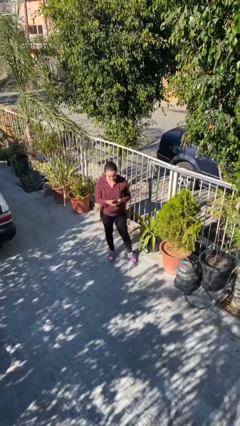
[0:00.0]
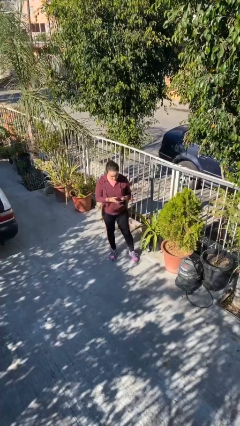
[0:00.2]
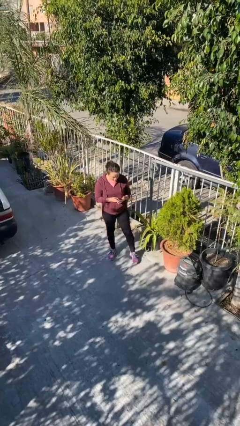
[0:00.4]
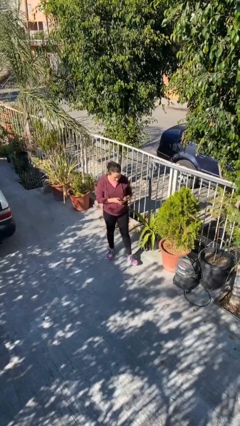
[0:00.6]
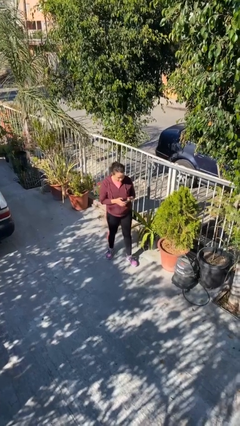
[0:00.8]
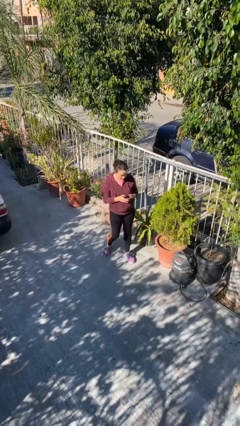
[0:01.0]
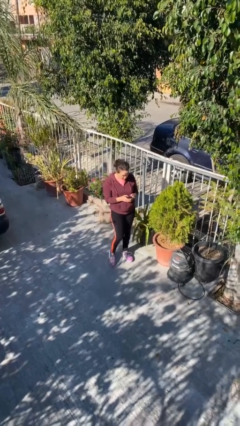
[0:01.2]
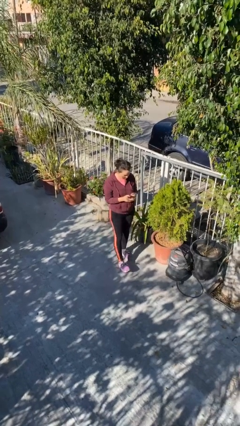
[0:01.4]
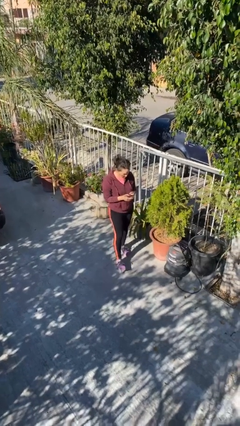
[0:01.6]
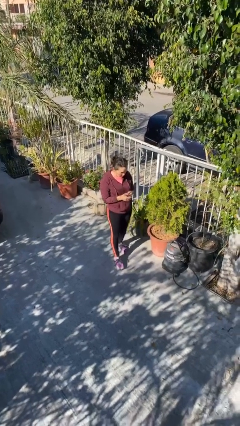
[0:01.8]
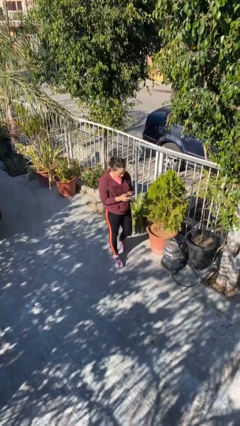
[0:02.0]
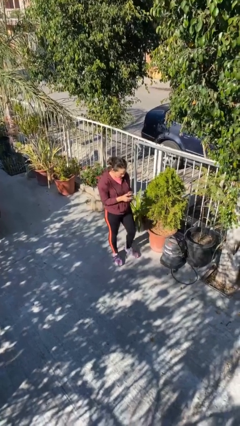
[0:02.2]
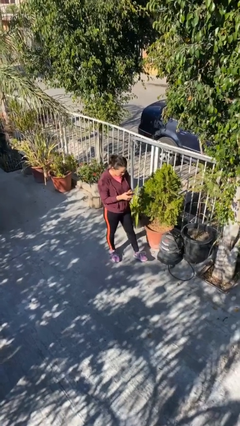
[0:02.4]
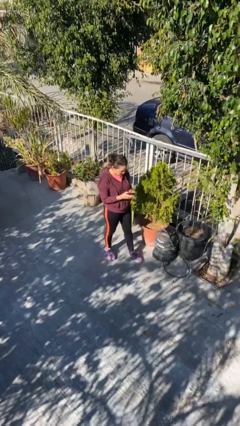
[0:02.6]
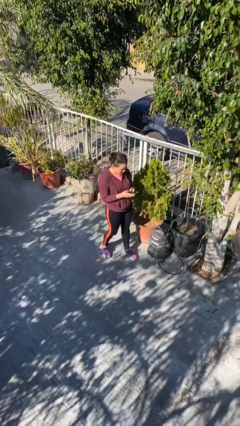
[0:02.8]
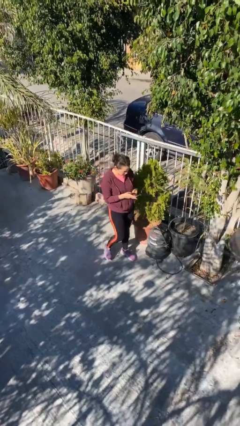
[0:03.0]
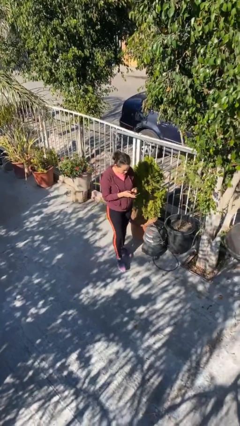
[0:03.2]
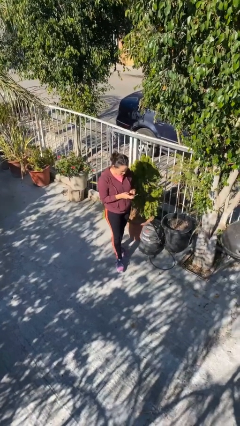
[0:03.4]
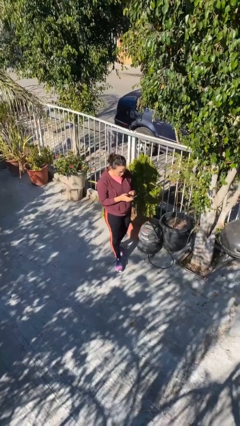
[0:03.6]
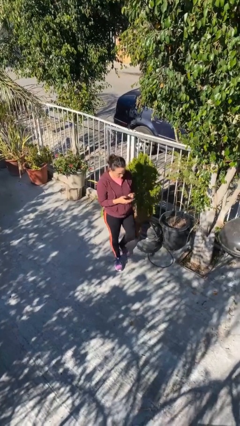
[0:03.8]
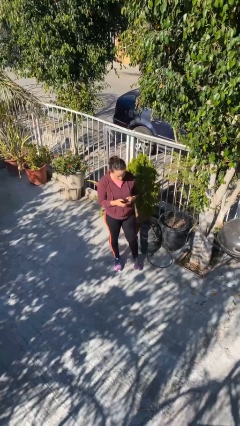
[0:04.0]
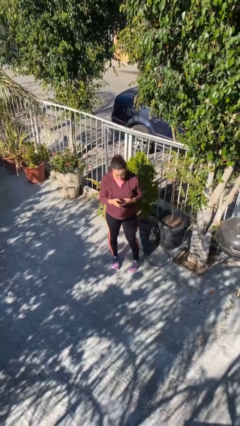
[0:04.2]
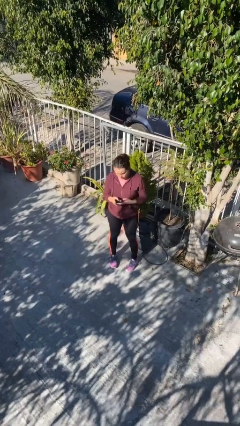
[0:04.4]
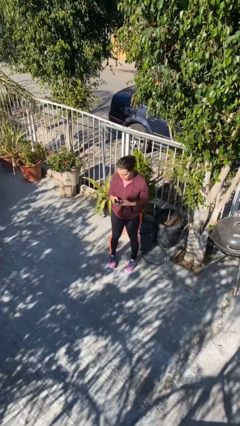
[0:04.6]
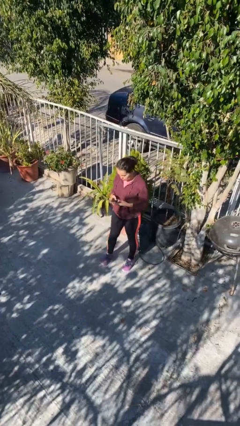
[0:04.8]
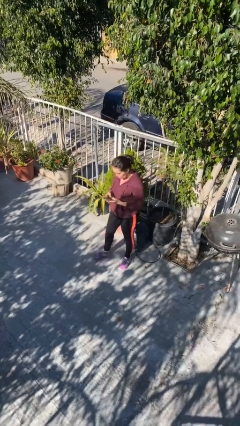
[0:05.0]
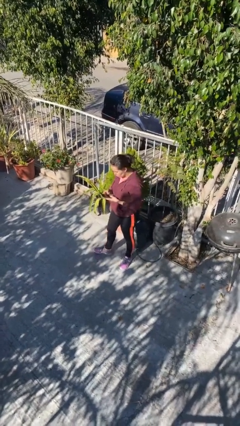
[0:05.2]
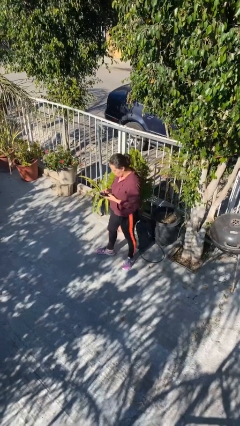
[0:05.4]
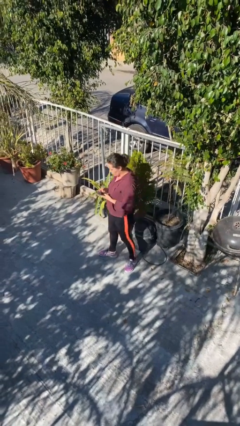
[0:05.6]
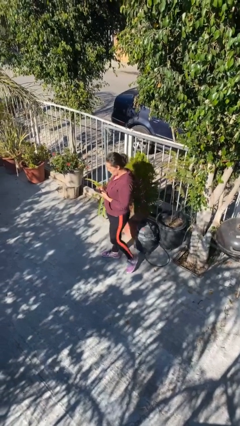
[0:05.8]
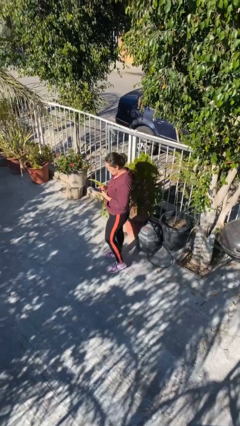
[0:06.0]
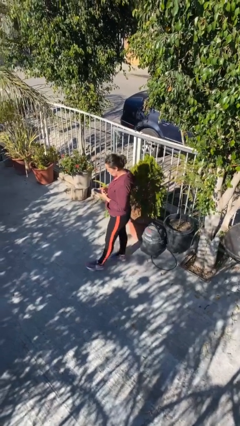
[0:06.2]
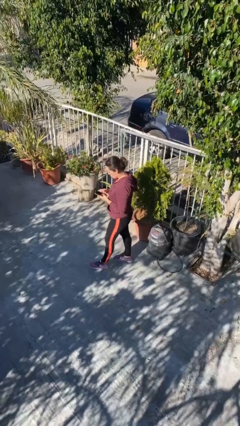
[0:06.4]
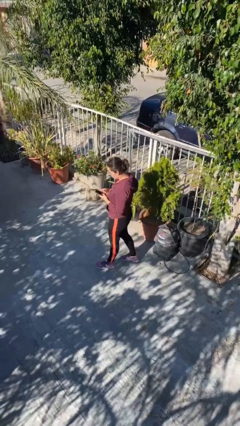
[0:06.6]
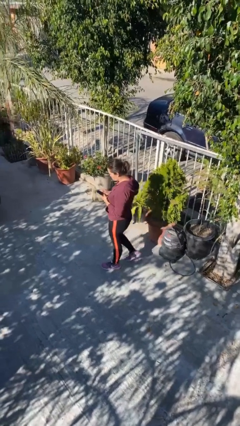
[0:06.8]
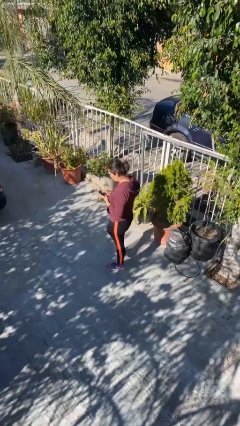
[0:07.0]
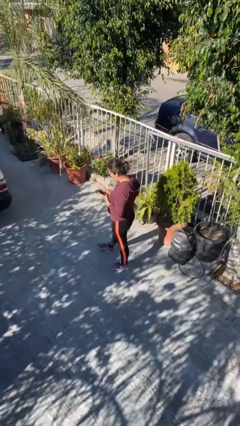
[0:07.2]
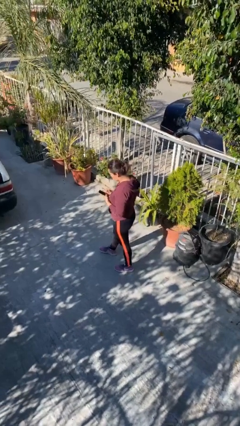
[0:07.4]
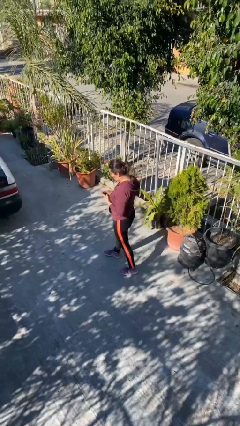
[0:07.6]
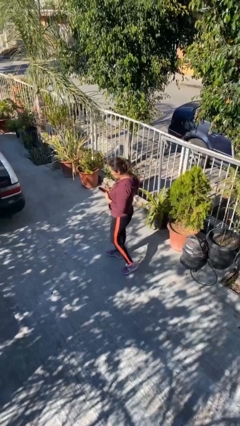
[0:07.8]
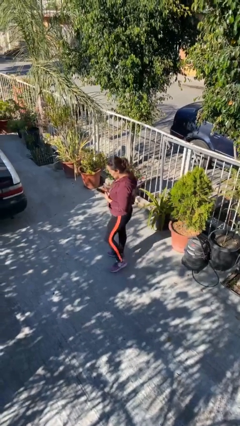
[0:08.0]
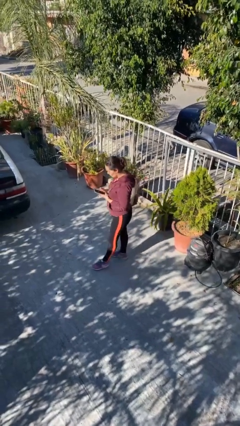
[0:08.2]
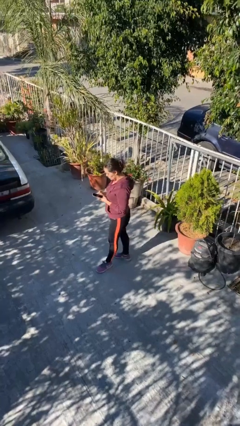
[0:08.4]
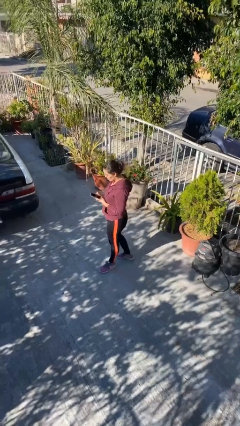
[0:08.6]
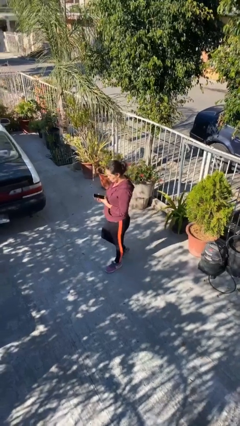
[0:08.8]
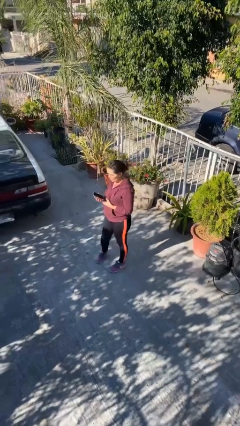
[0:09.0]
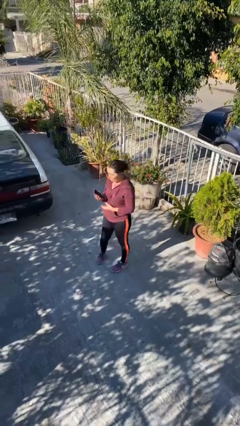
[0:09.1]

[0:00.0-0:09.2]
person texts on phone

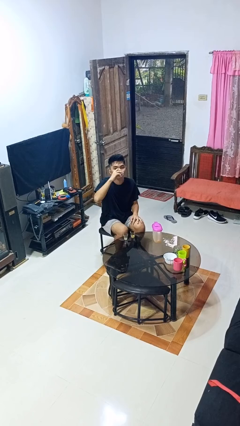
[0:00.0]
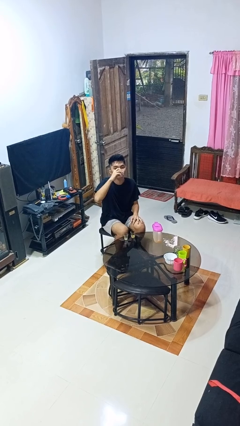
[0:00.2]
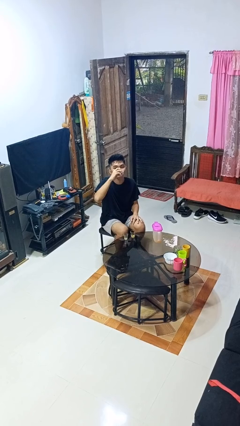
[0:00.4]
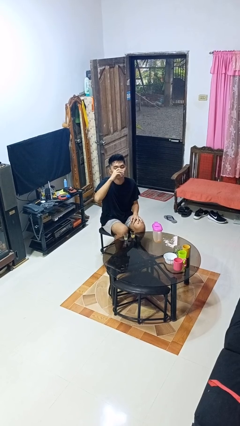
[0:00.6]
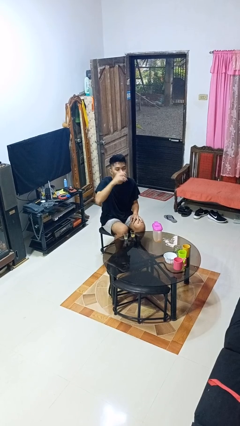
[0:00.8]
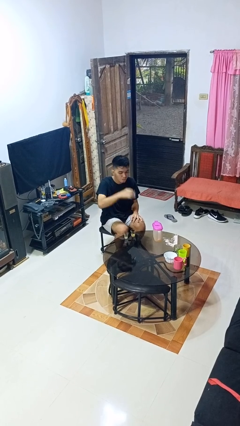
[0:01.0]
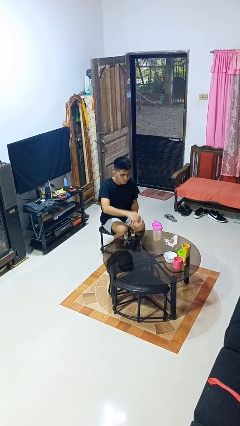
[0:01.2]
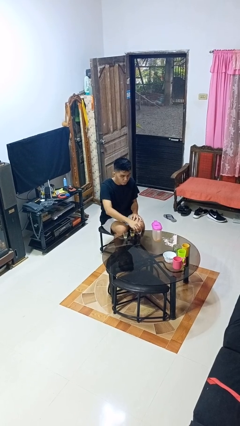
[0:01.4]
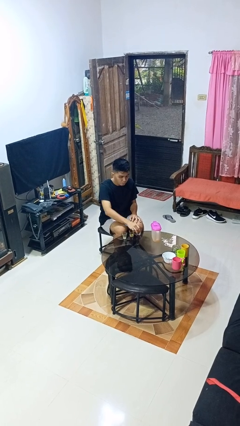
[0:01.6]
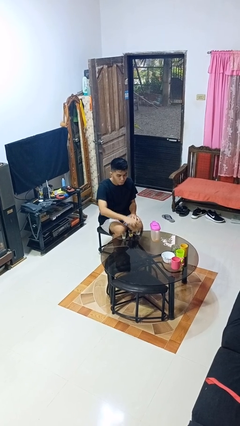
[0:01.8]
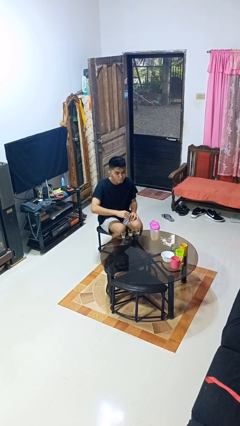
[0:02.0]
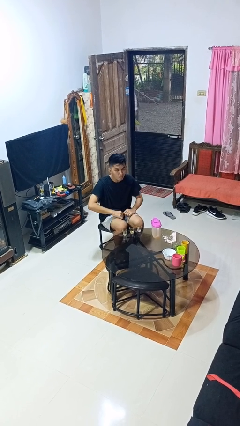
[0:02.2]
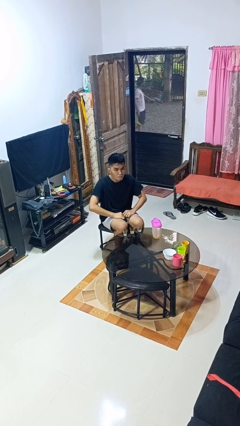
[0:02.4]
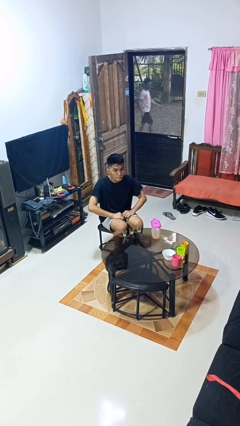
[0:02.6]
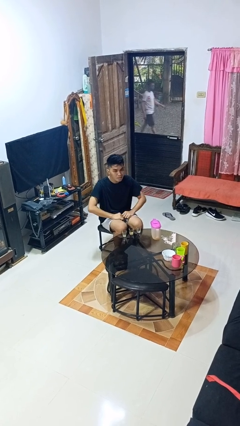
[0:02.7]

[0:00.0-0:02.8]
person puts down object on table

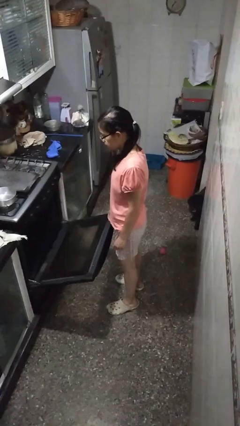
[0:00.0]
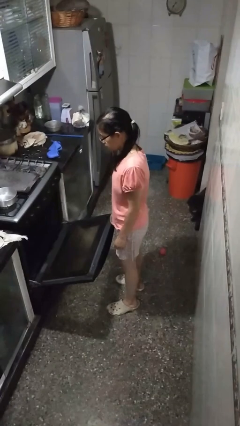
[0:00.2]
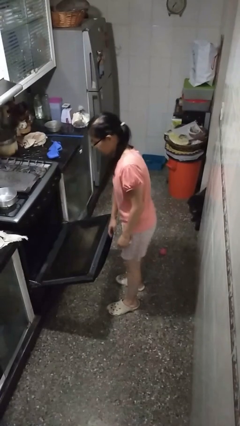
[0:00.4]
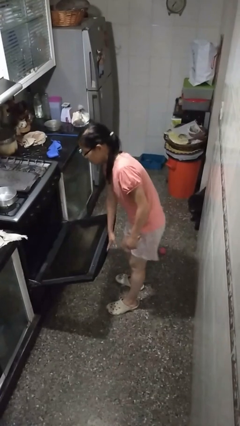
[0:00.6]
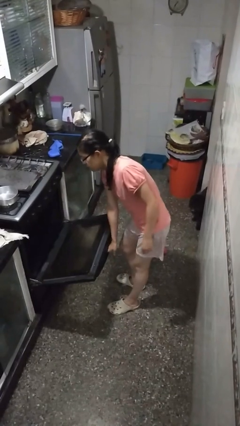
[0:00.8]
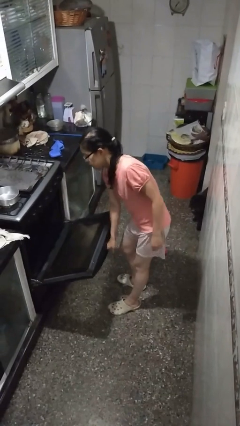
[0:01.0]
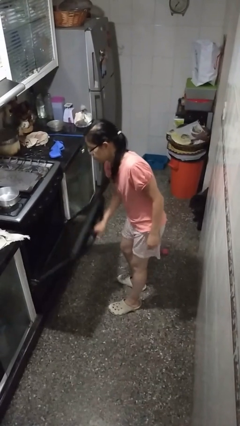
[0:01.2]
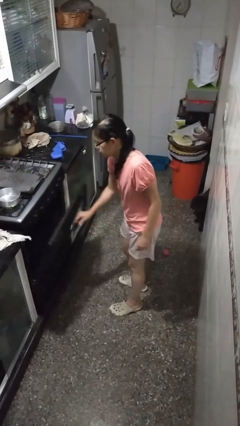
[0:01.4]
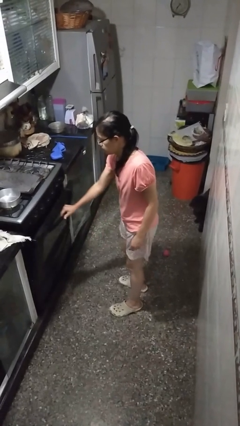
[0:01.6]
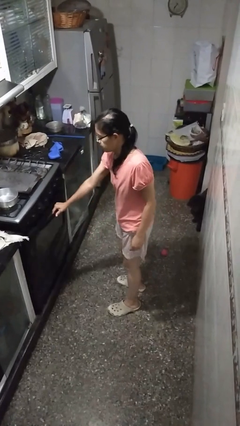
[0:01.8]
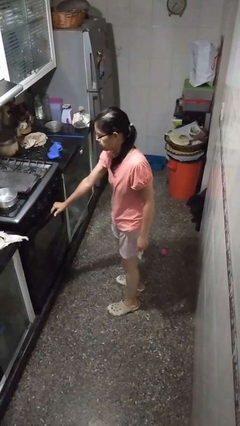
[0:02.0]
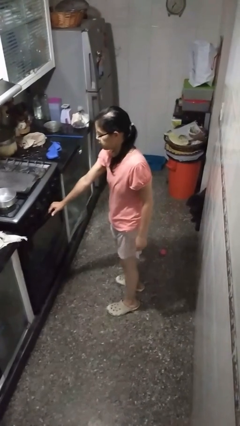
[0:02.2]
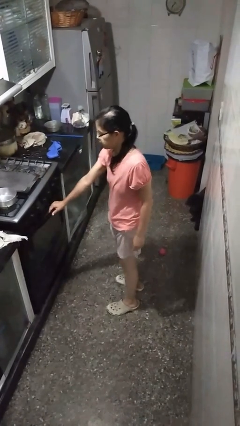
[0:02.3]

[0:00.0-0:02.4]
person closes oven door

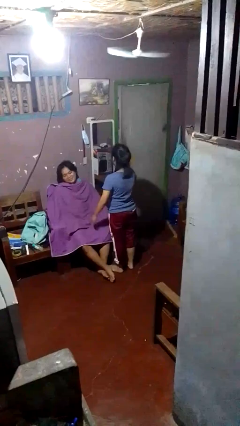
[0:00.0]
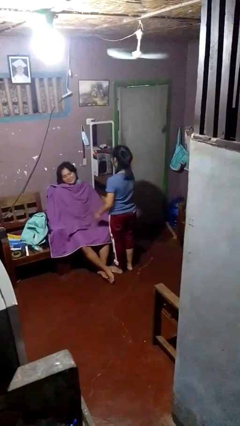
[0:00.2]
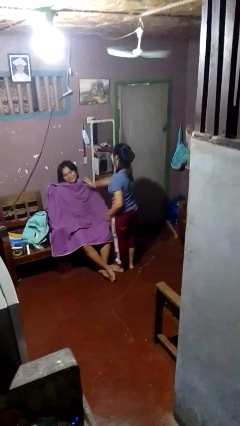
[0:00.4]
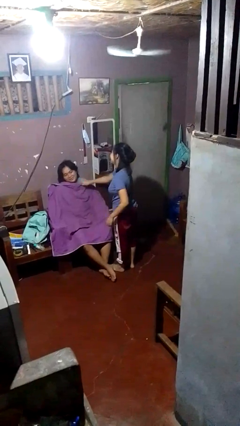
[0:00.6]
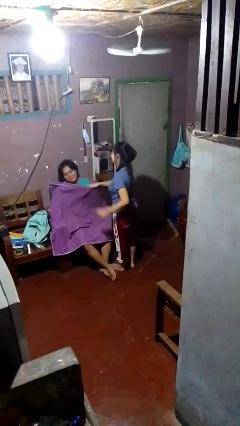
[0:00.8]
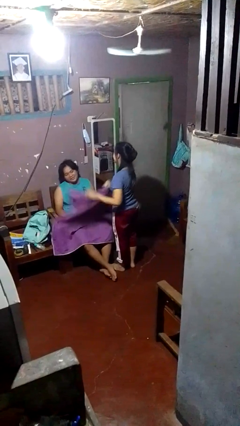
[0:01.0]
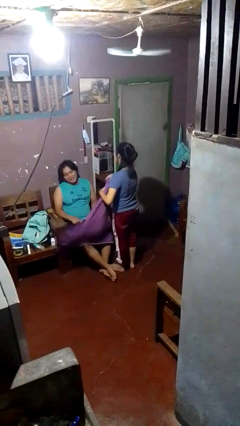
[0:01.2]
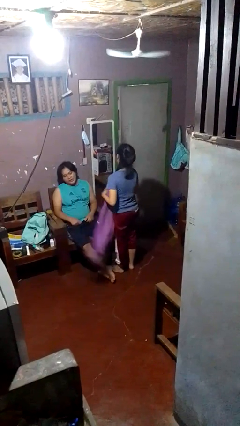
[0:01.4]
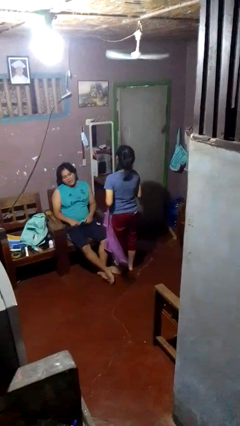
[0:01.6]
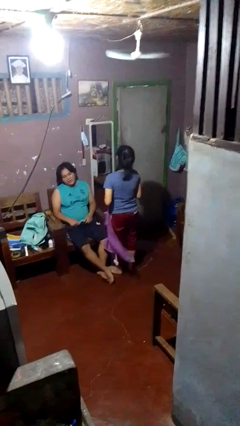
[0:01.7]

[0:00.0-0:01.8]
person uncovers friend with blanket

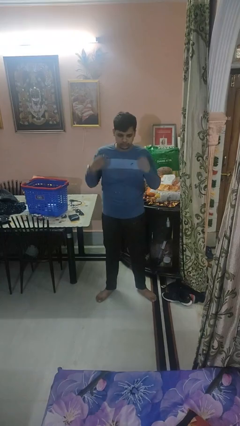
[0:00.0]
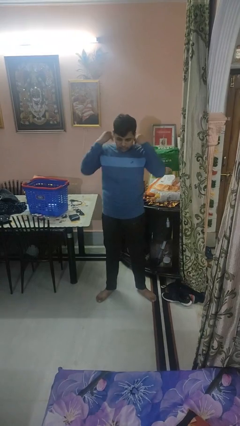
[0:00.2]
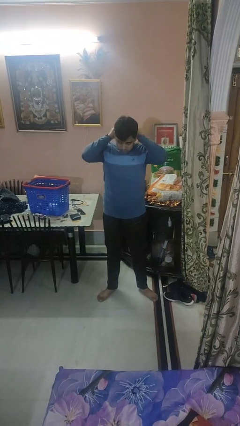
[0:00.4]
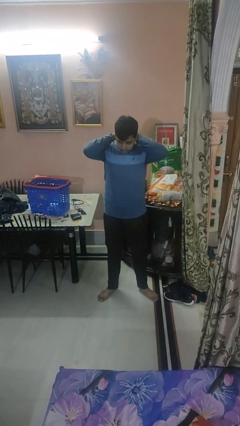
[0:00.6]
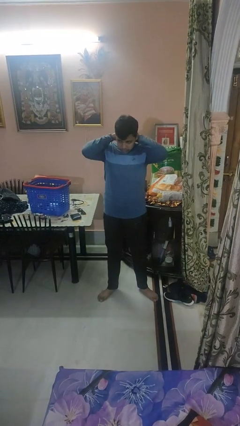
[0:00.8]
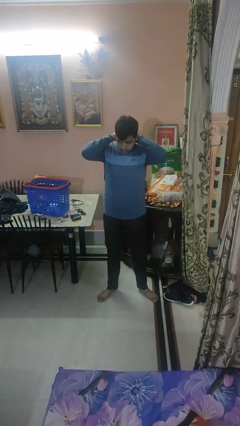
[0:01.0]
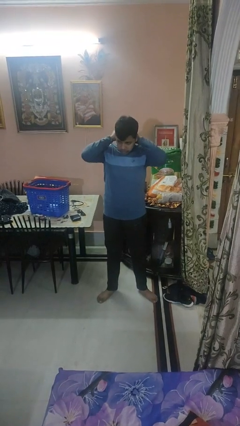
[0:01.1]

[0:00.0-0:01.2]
person puts on necklace
